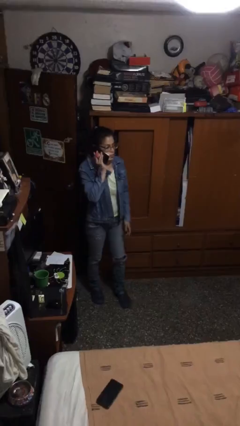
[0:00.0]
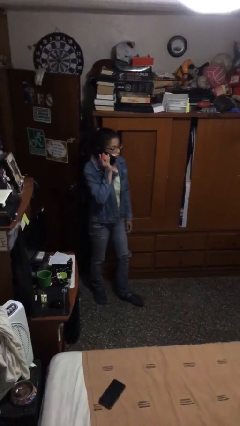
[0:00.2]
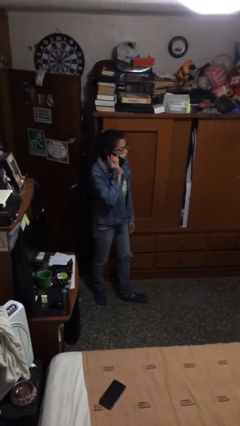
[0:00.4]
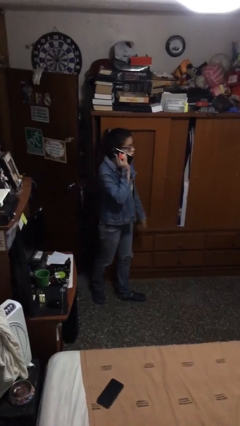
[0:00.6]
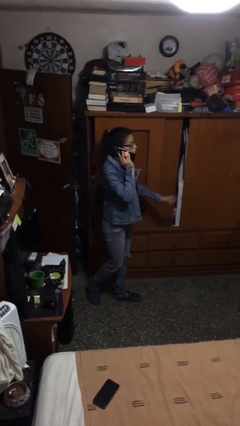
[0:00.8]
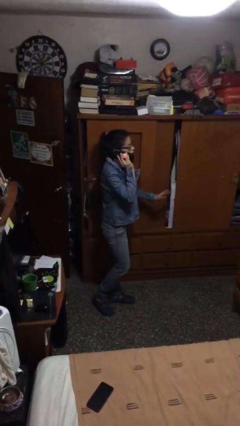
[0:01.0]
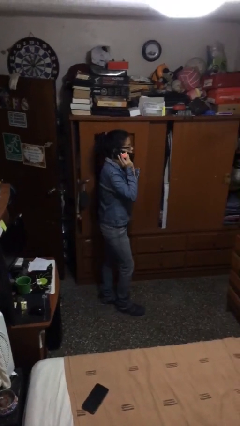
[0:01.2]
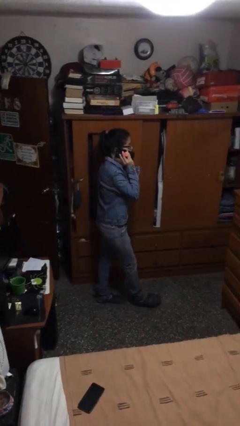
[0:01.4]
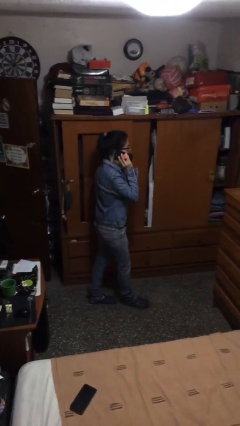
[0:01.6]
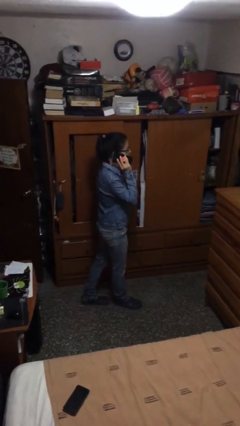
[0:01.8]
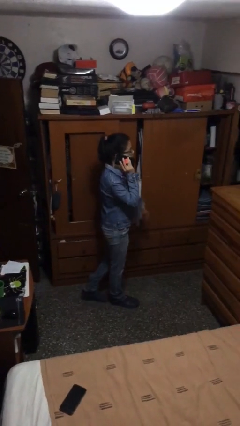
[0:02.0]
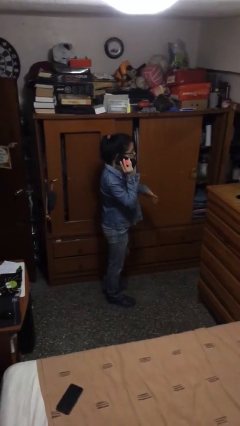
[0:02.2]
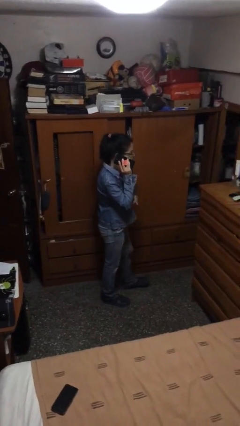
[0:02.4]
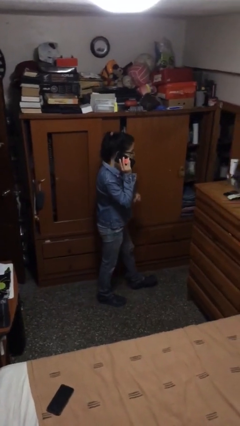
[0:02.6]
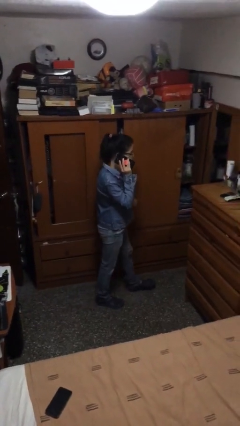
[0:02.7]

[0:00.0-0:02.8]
person talks on phone

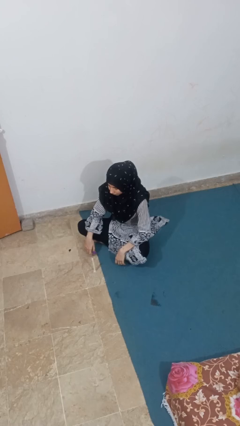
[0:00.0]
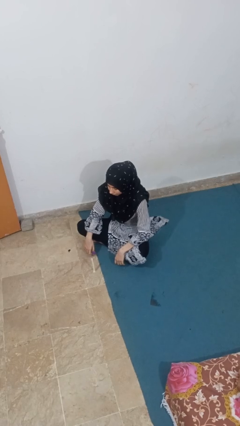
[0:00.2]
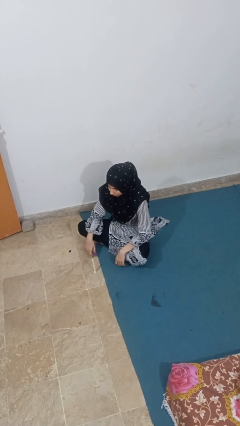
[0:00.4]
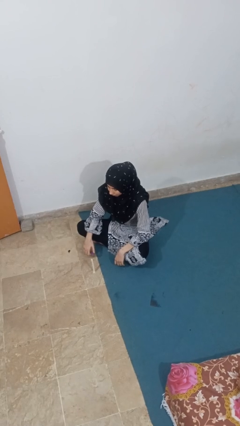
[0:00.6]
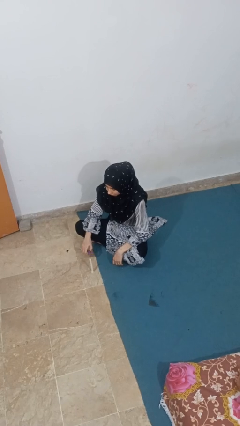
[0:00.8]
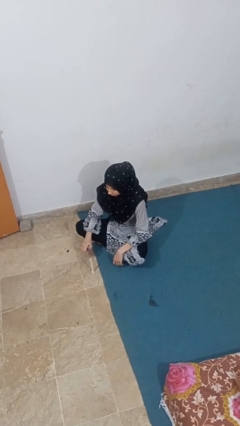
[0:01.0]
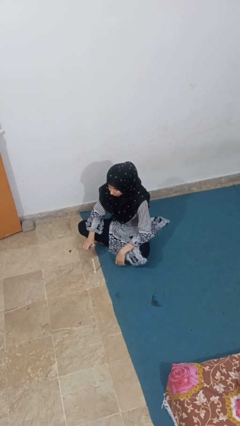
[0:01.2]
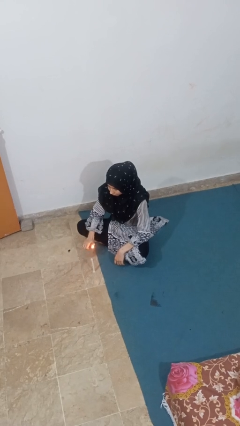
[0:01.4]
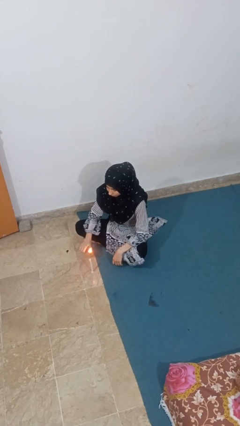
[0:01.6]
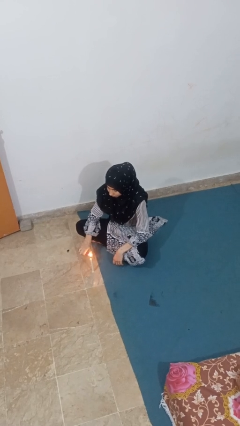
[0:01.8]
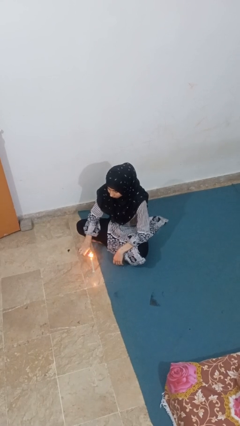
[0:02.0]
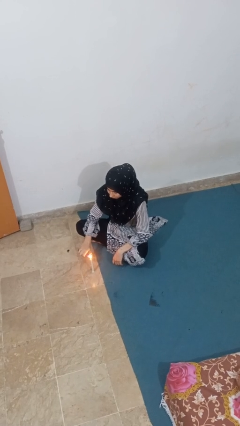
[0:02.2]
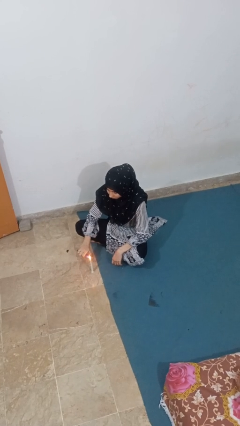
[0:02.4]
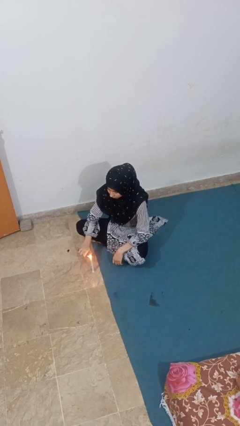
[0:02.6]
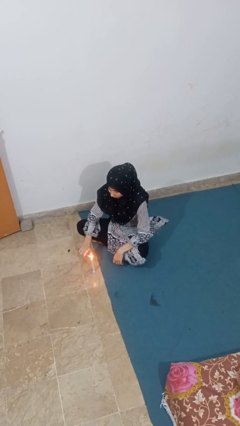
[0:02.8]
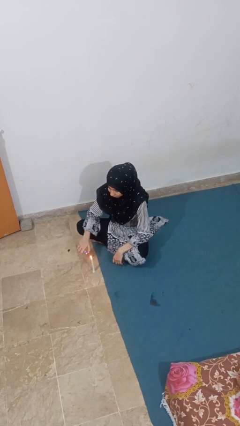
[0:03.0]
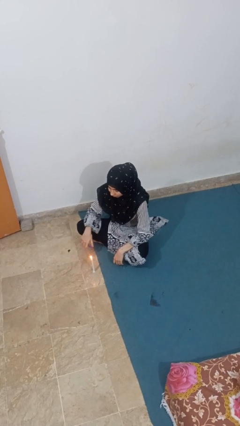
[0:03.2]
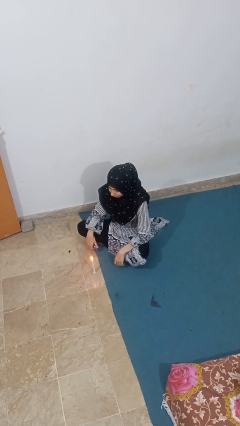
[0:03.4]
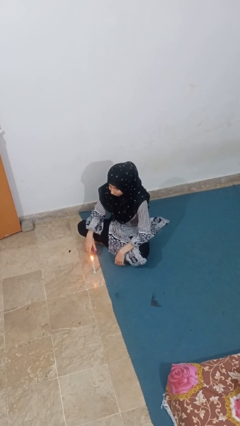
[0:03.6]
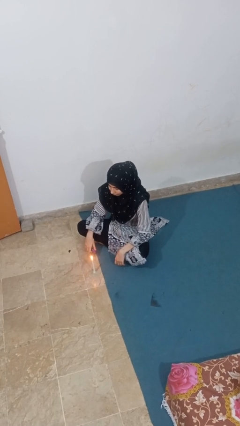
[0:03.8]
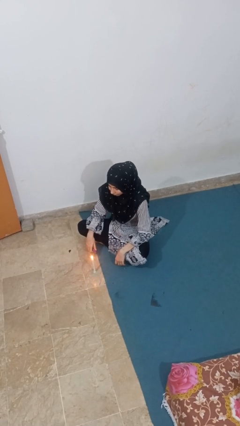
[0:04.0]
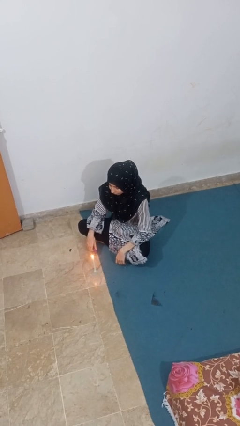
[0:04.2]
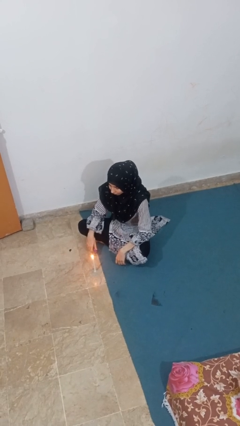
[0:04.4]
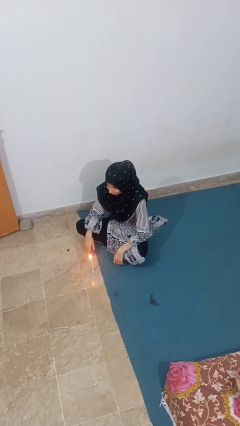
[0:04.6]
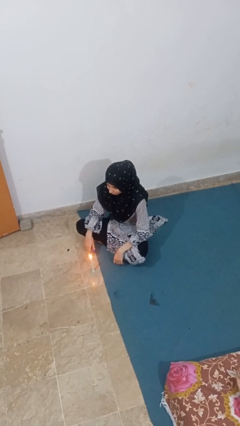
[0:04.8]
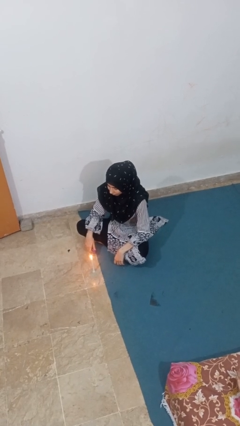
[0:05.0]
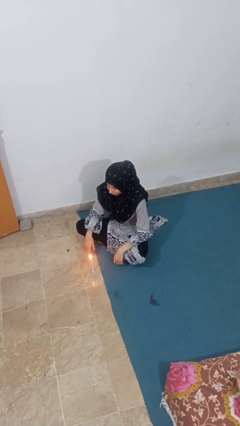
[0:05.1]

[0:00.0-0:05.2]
person lights candle

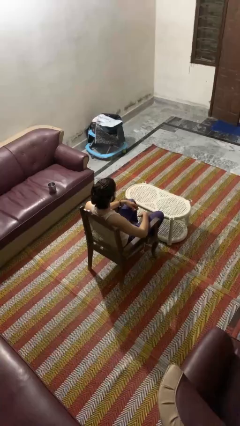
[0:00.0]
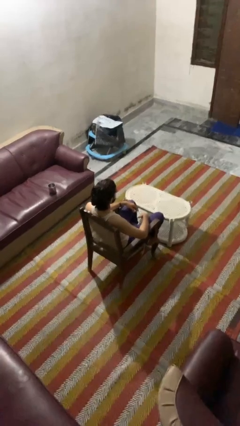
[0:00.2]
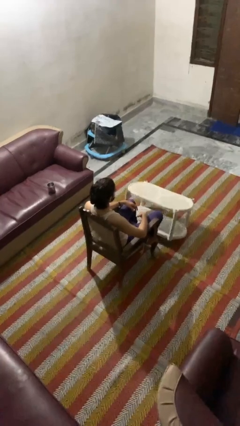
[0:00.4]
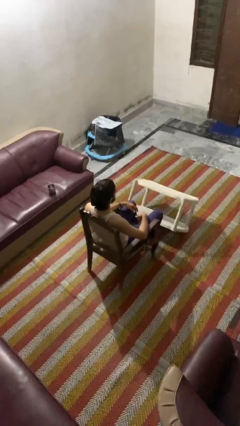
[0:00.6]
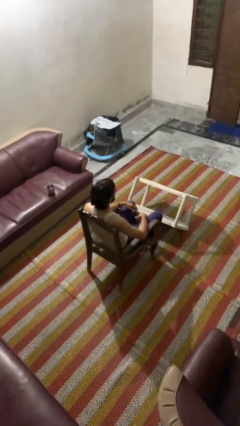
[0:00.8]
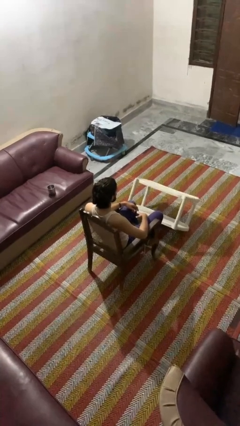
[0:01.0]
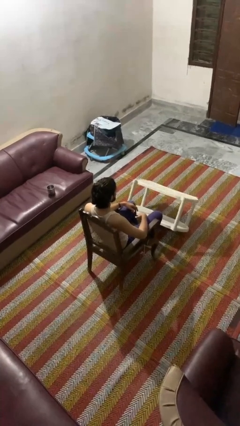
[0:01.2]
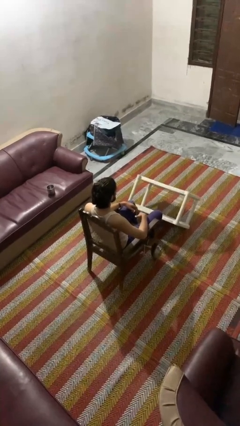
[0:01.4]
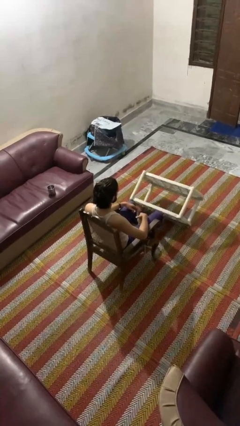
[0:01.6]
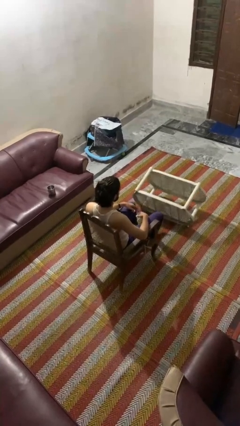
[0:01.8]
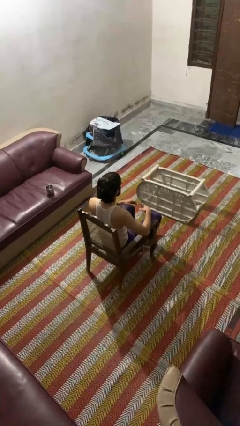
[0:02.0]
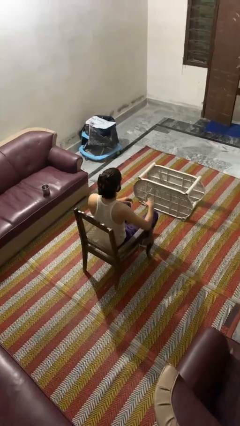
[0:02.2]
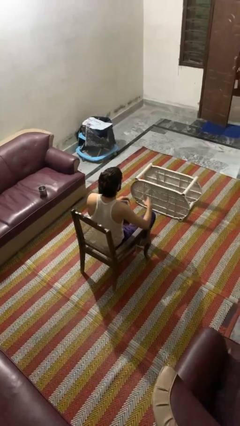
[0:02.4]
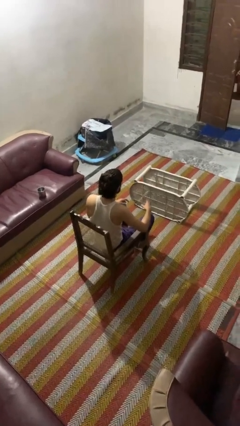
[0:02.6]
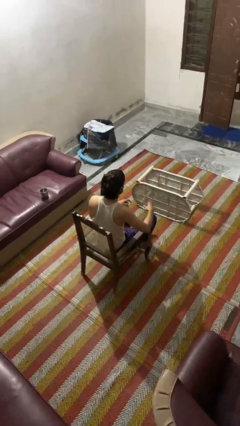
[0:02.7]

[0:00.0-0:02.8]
person knocks over furniture

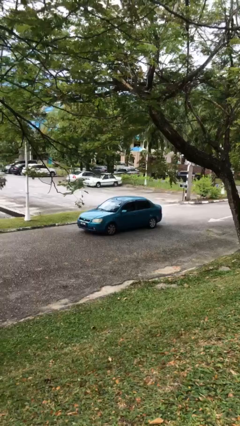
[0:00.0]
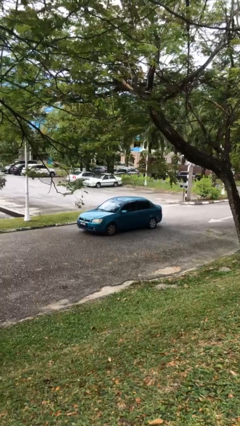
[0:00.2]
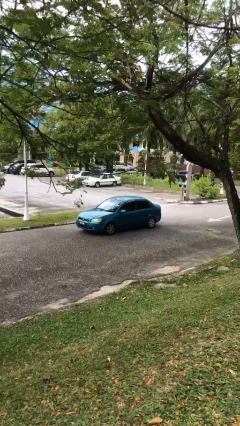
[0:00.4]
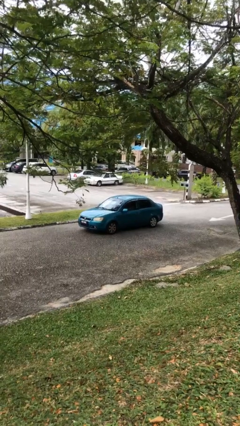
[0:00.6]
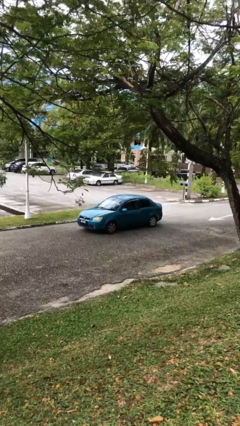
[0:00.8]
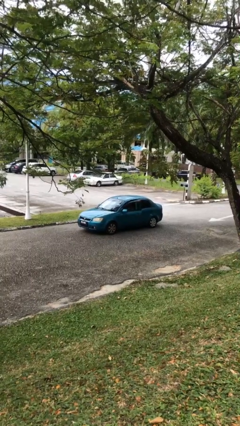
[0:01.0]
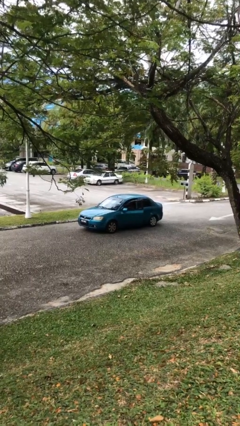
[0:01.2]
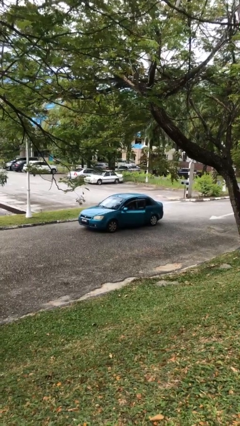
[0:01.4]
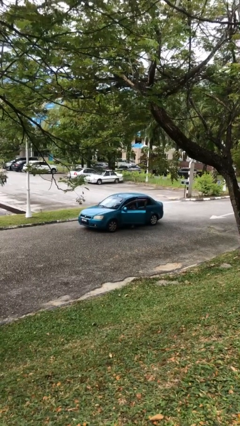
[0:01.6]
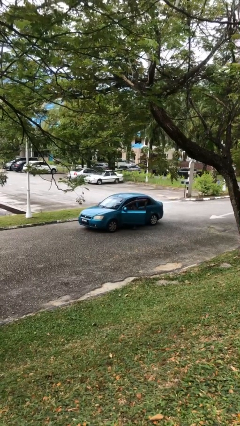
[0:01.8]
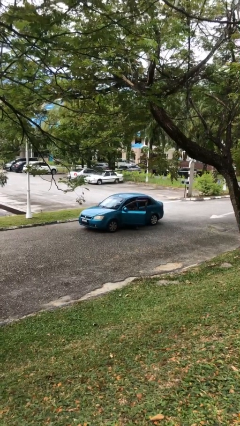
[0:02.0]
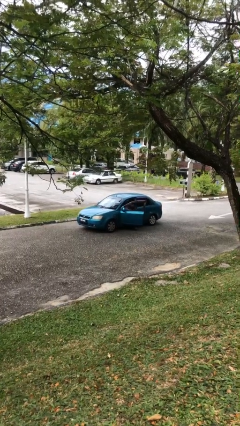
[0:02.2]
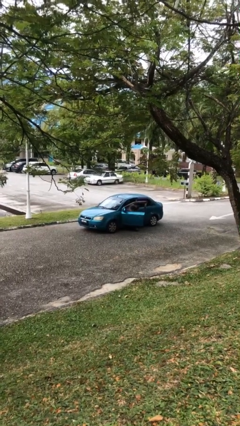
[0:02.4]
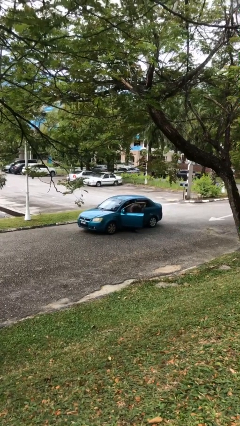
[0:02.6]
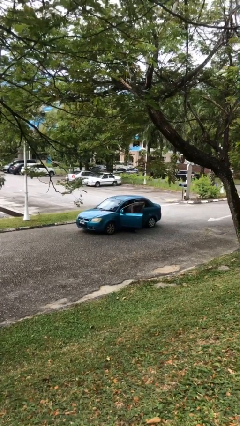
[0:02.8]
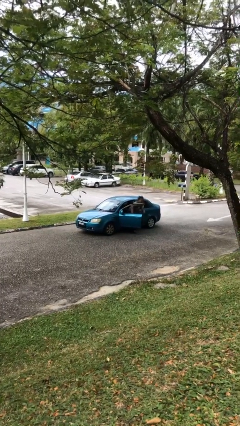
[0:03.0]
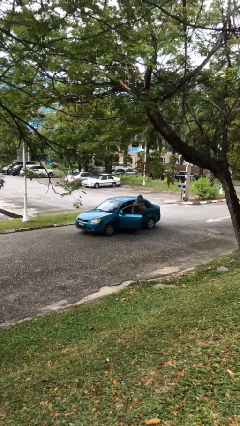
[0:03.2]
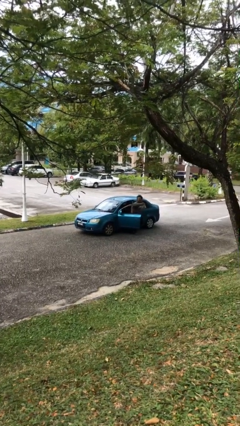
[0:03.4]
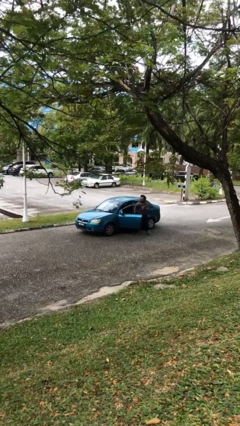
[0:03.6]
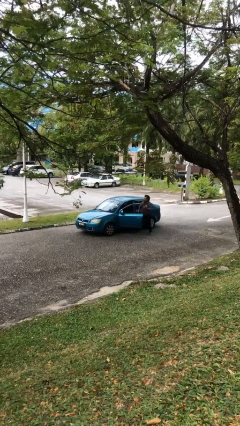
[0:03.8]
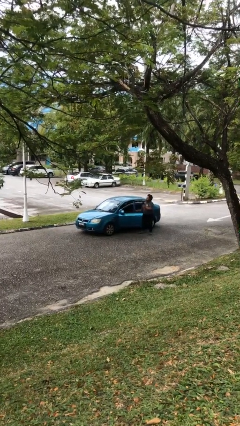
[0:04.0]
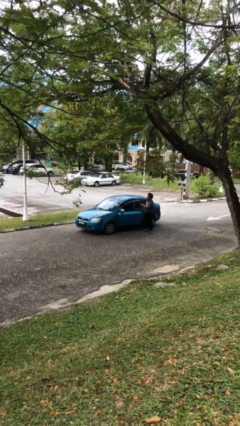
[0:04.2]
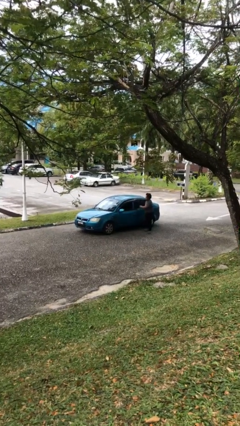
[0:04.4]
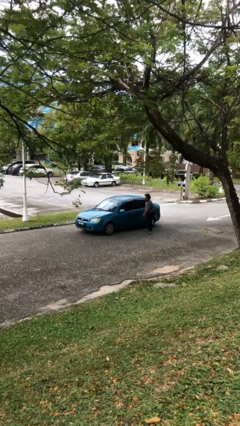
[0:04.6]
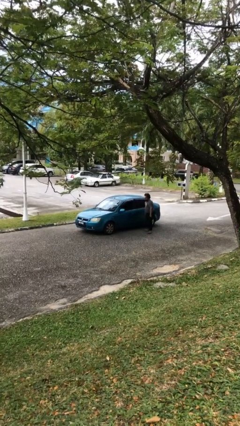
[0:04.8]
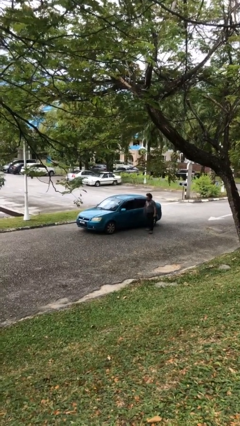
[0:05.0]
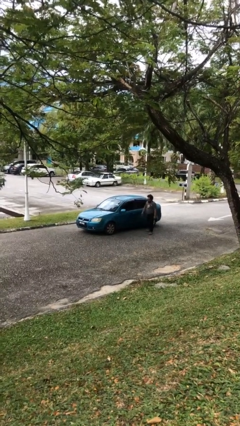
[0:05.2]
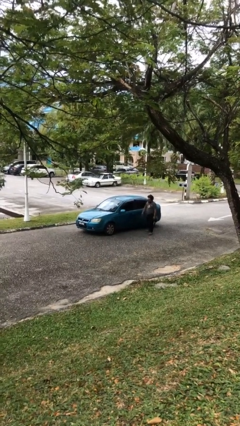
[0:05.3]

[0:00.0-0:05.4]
car drops off person

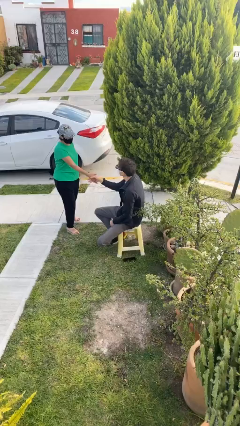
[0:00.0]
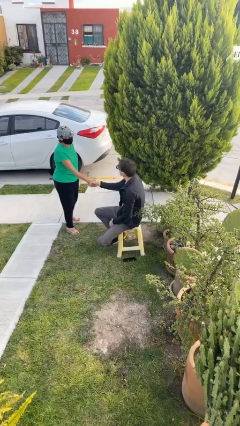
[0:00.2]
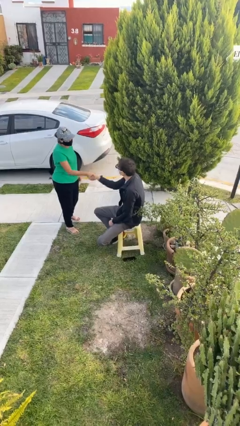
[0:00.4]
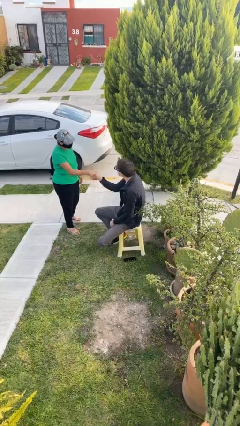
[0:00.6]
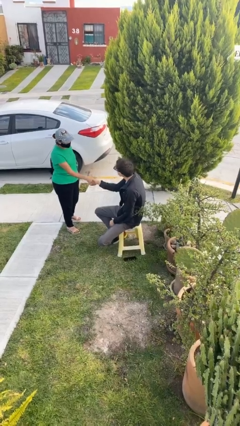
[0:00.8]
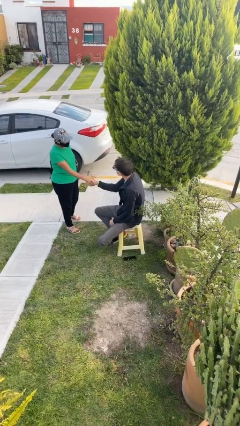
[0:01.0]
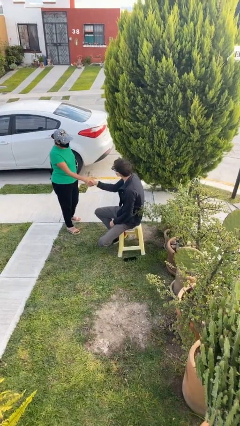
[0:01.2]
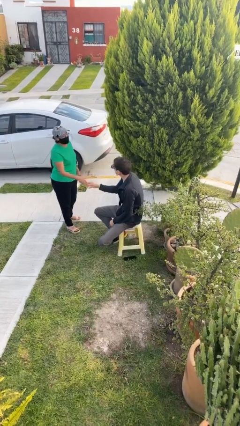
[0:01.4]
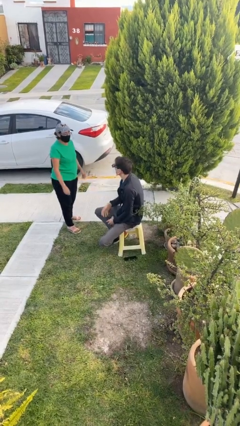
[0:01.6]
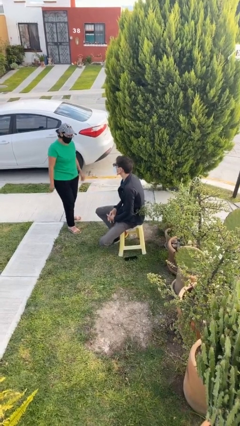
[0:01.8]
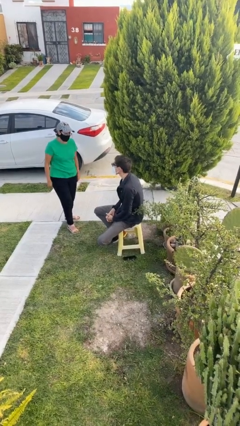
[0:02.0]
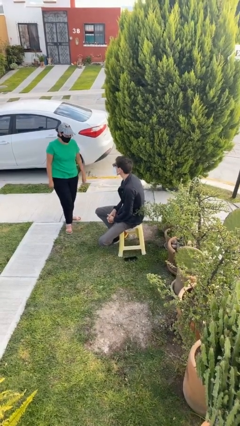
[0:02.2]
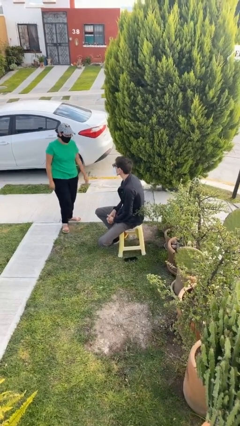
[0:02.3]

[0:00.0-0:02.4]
person shakes hand
